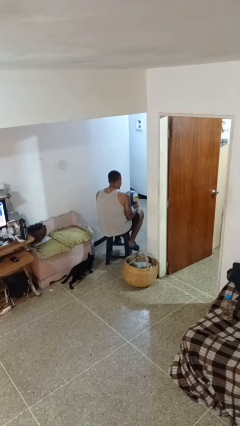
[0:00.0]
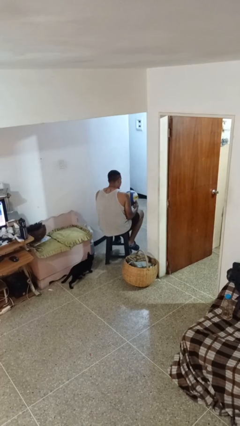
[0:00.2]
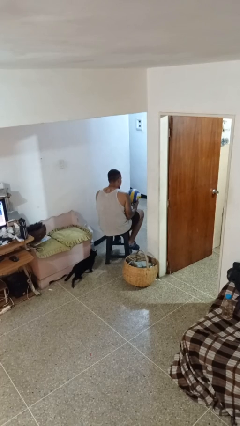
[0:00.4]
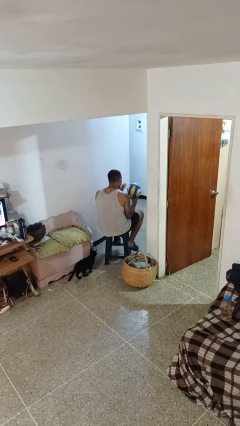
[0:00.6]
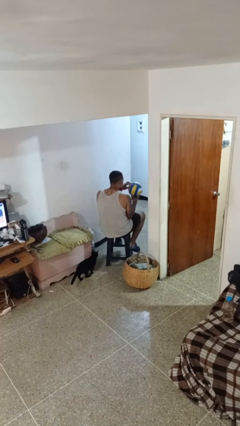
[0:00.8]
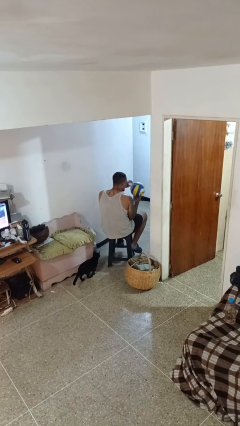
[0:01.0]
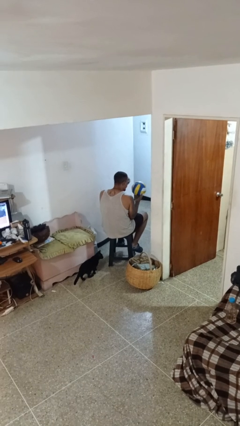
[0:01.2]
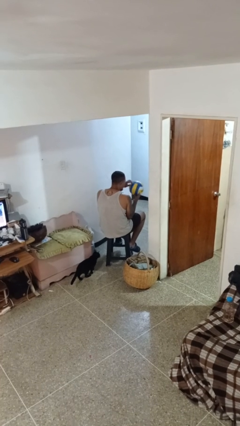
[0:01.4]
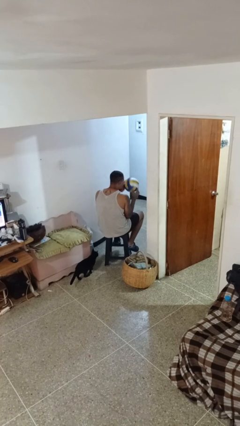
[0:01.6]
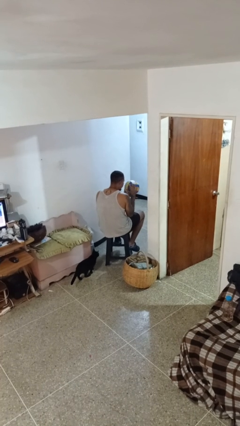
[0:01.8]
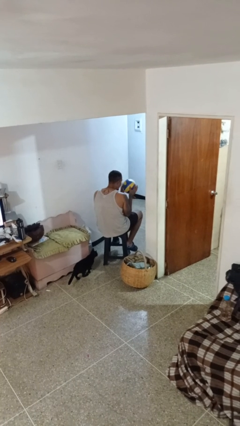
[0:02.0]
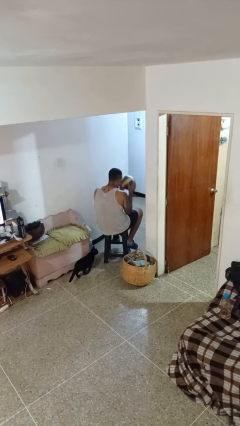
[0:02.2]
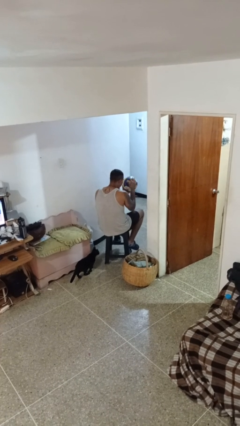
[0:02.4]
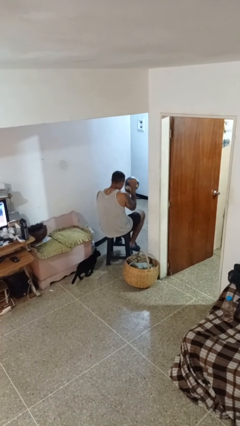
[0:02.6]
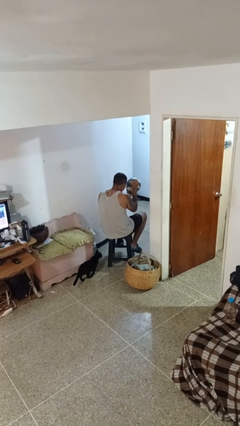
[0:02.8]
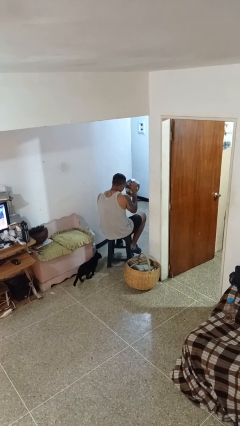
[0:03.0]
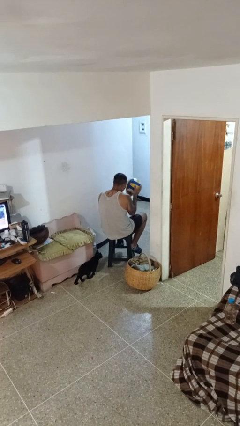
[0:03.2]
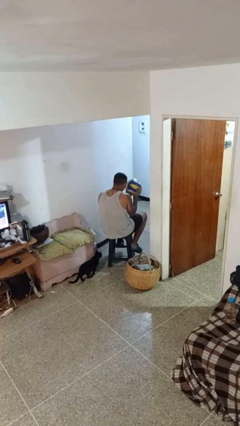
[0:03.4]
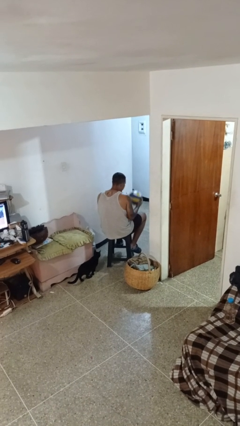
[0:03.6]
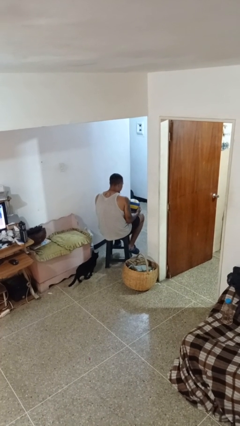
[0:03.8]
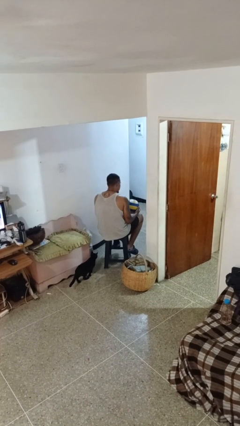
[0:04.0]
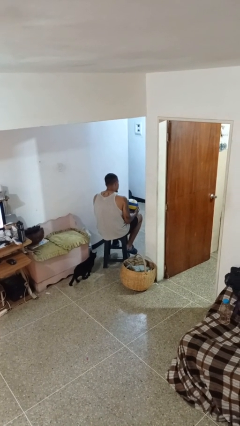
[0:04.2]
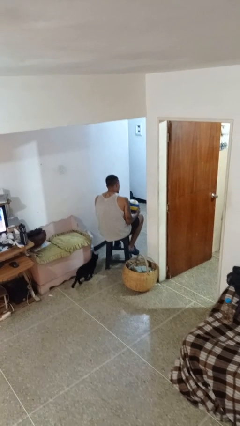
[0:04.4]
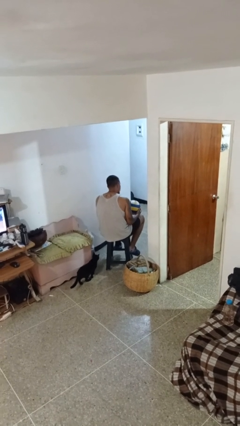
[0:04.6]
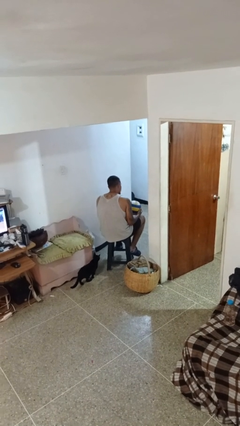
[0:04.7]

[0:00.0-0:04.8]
person taps object with finger

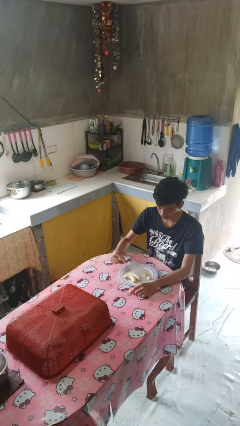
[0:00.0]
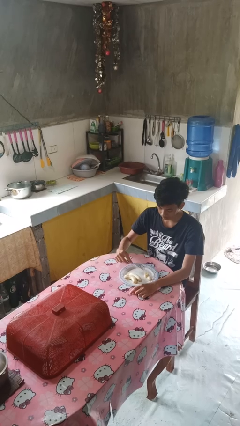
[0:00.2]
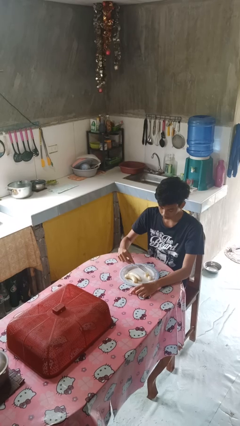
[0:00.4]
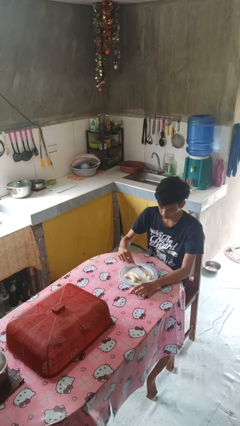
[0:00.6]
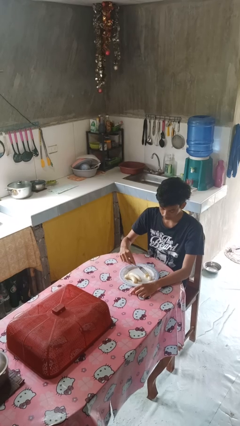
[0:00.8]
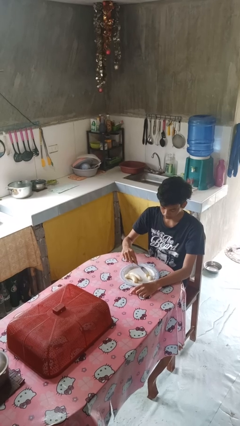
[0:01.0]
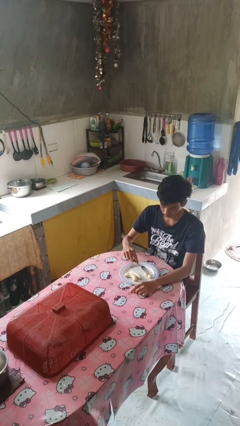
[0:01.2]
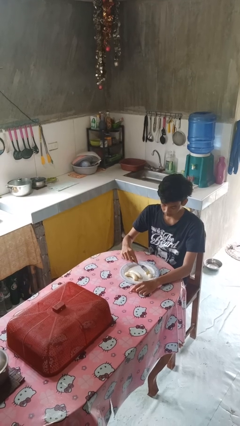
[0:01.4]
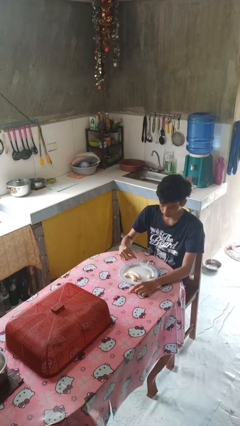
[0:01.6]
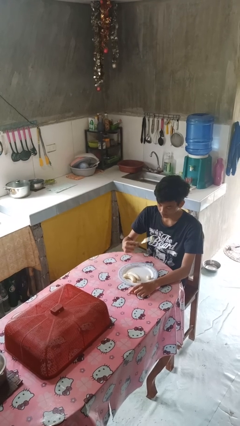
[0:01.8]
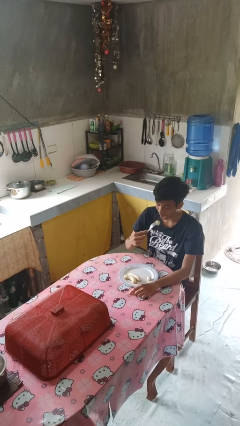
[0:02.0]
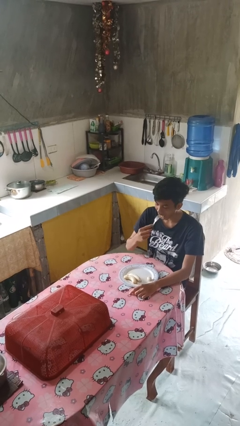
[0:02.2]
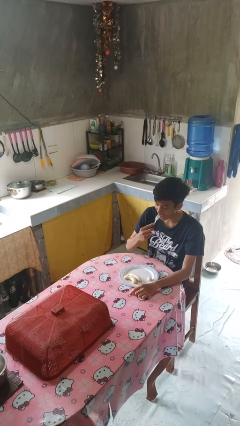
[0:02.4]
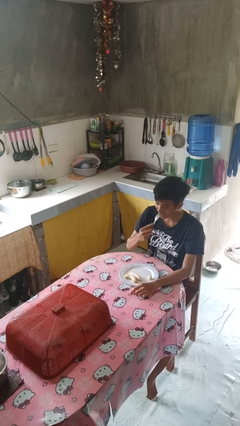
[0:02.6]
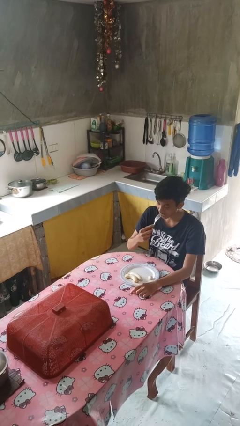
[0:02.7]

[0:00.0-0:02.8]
person eats with utensil

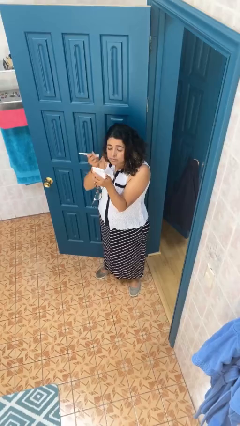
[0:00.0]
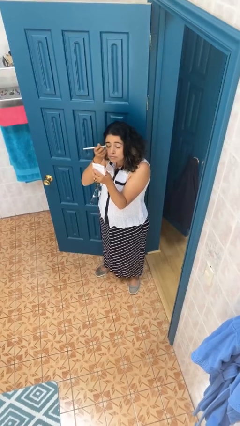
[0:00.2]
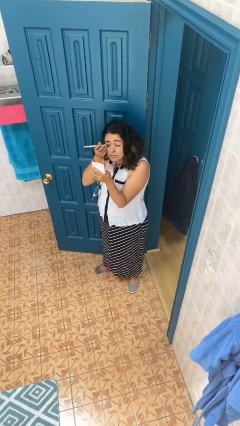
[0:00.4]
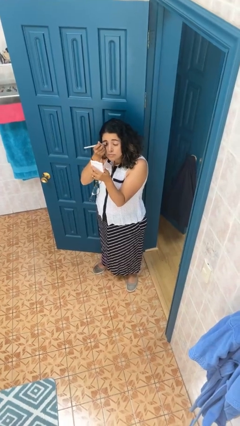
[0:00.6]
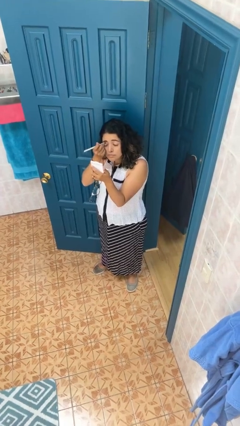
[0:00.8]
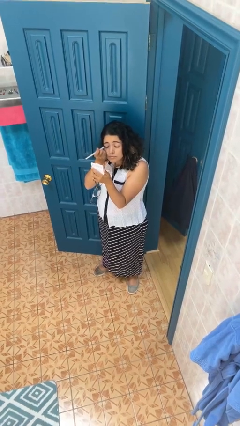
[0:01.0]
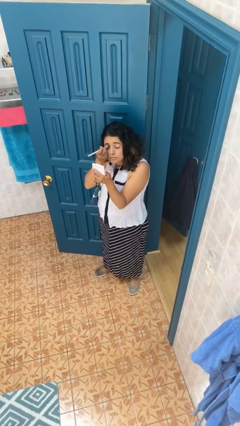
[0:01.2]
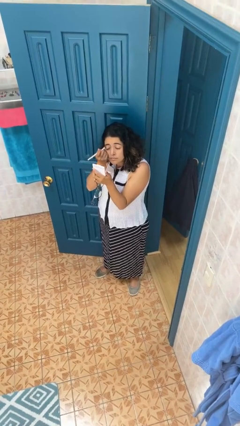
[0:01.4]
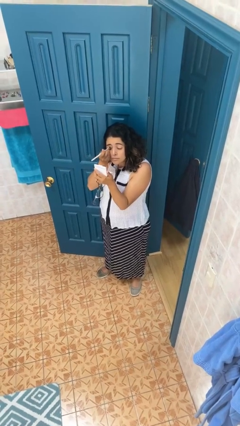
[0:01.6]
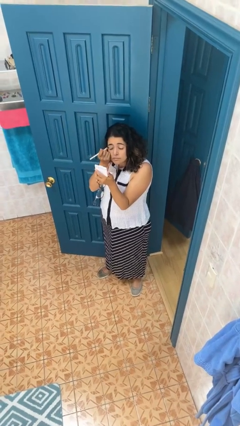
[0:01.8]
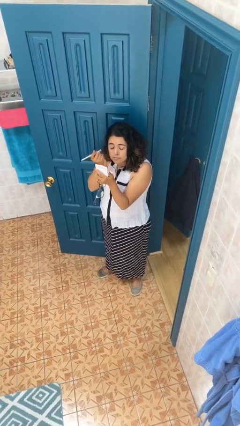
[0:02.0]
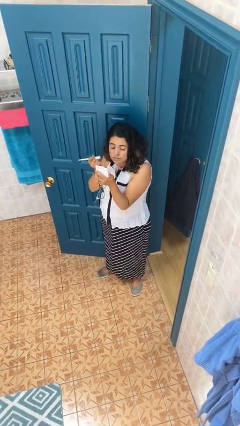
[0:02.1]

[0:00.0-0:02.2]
person applies eye makeup

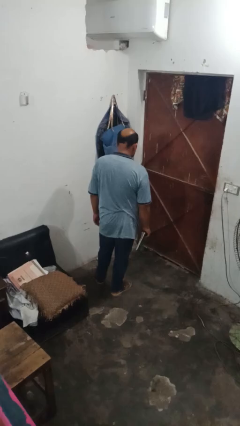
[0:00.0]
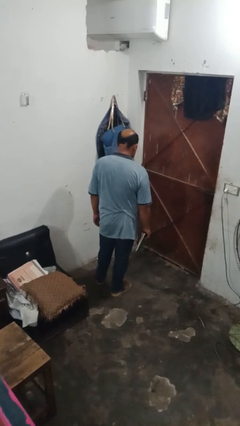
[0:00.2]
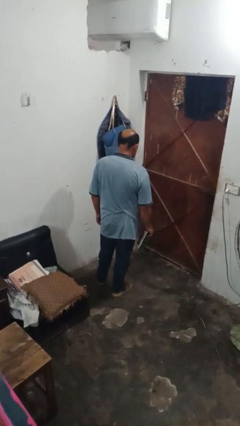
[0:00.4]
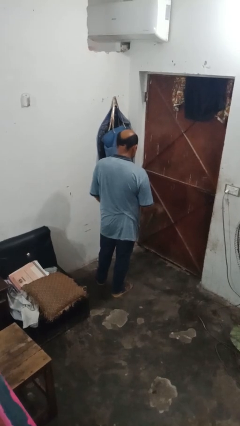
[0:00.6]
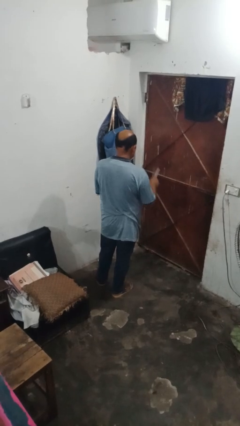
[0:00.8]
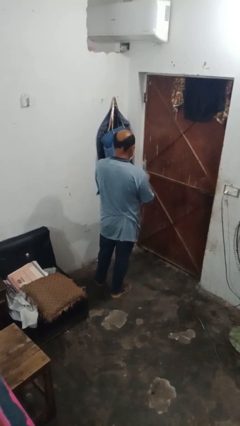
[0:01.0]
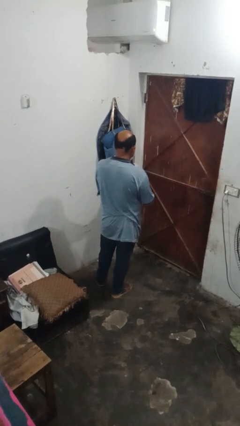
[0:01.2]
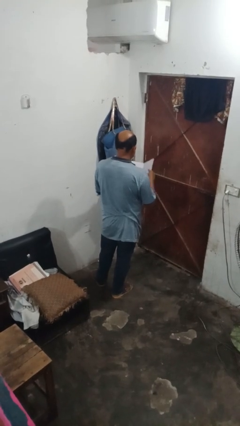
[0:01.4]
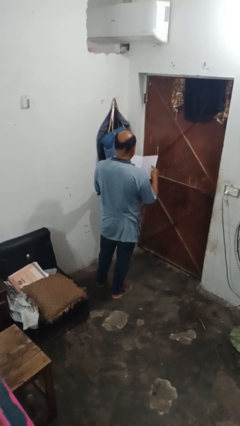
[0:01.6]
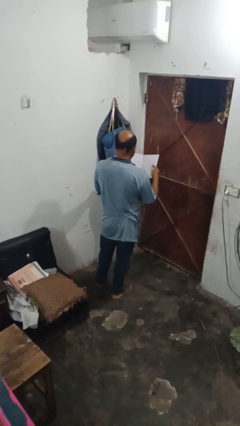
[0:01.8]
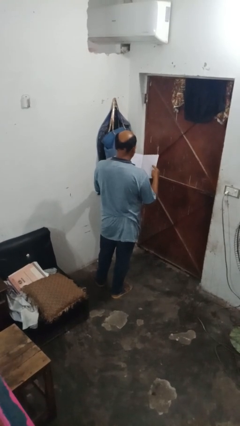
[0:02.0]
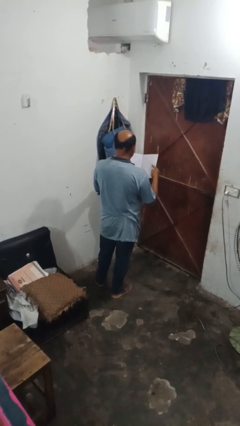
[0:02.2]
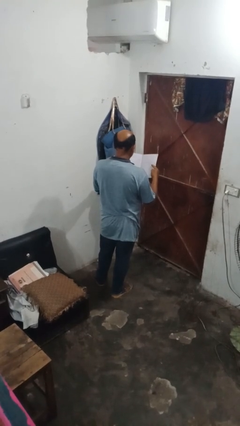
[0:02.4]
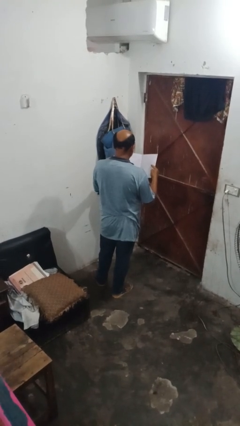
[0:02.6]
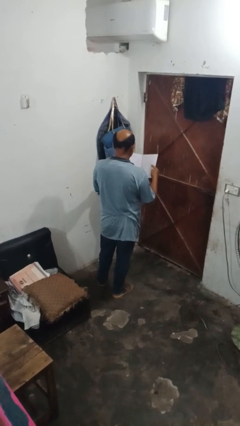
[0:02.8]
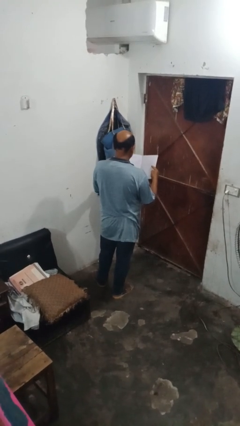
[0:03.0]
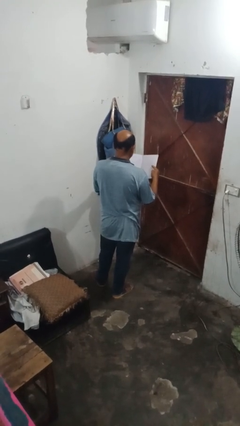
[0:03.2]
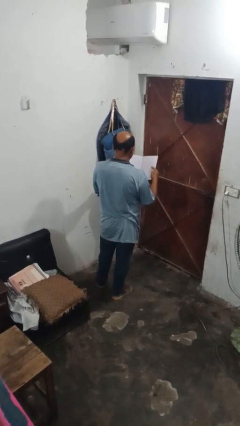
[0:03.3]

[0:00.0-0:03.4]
person reads book

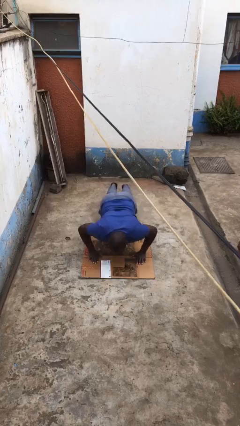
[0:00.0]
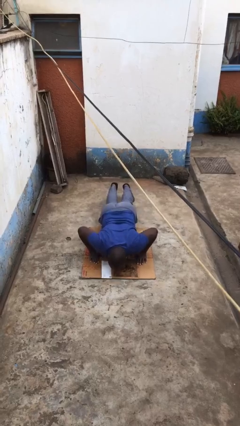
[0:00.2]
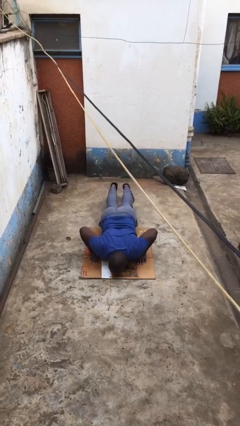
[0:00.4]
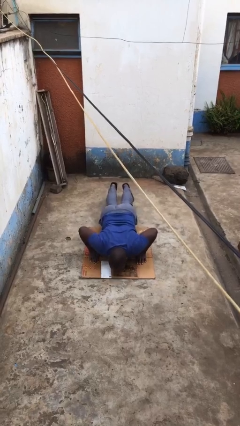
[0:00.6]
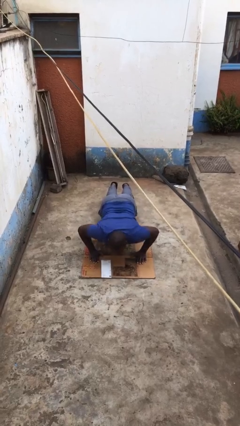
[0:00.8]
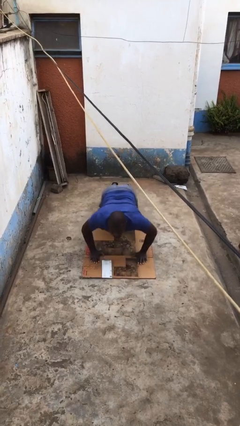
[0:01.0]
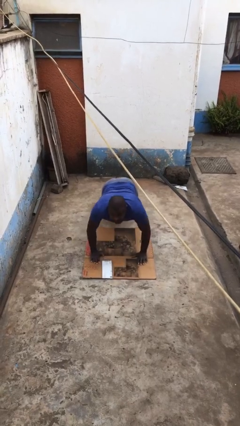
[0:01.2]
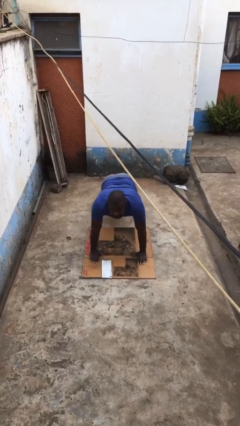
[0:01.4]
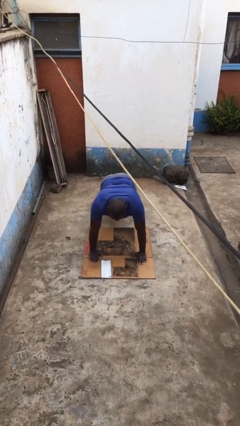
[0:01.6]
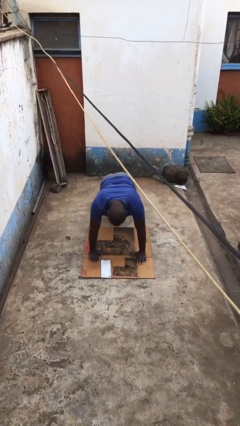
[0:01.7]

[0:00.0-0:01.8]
person exercises with pushup

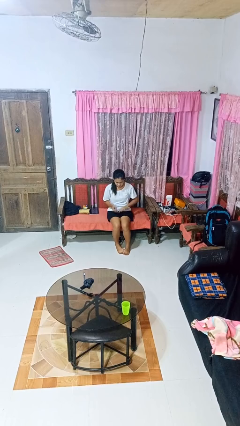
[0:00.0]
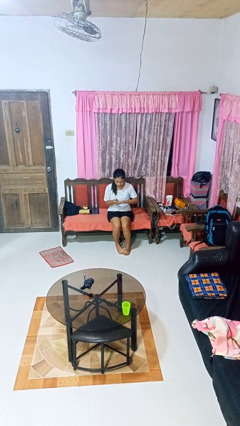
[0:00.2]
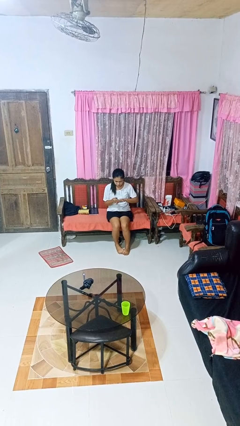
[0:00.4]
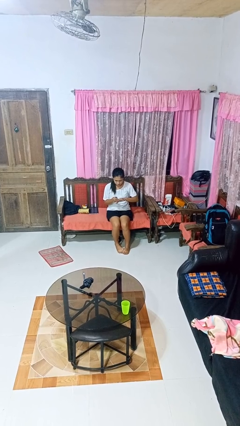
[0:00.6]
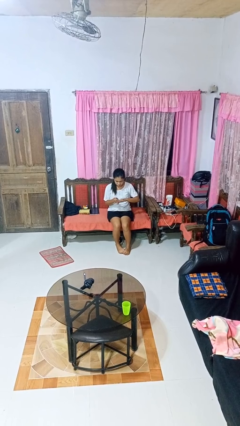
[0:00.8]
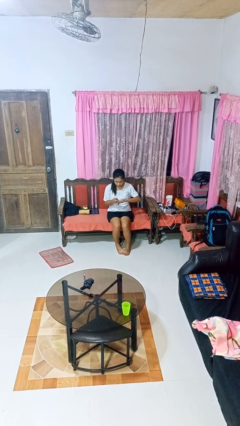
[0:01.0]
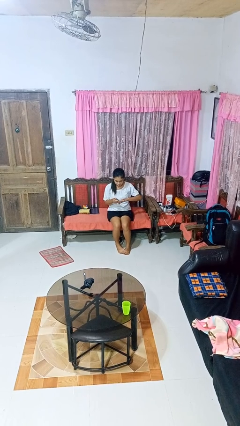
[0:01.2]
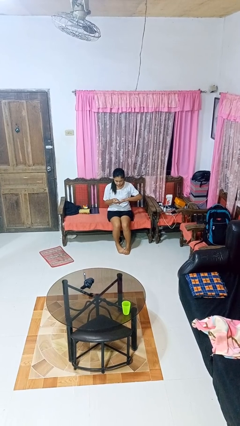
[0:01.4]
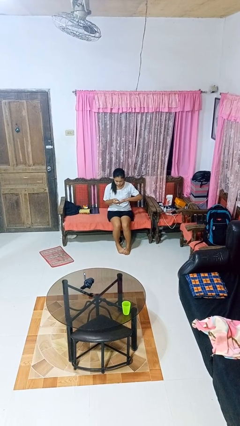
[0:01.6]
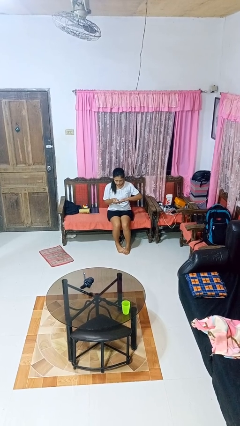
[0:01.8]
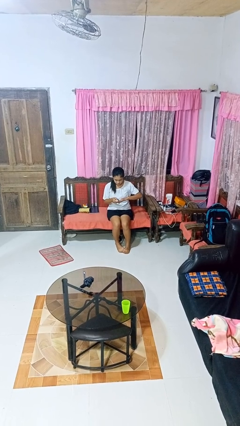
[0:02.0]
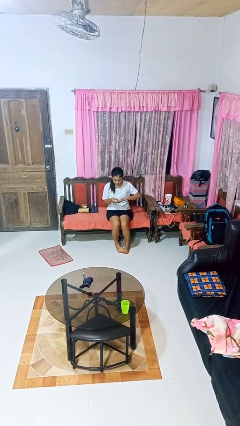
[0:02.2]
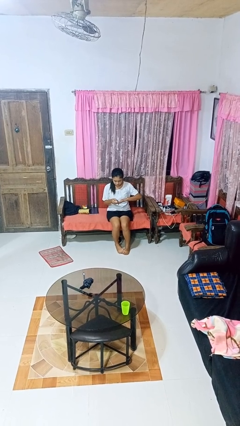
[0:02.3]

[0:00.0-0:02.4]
person clips fingernails

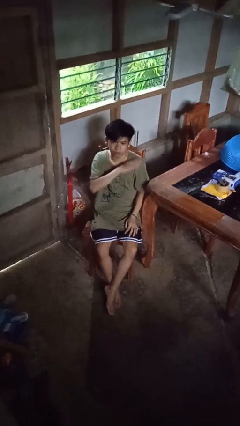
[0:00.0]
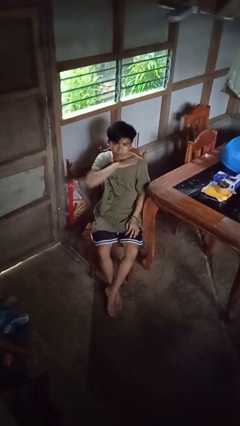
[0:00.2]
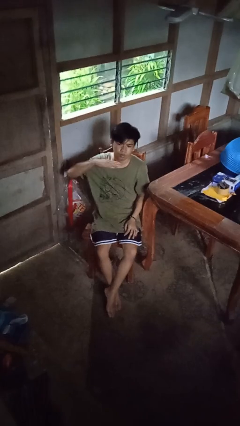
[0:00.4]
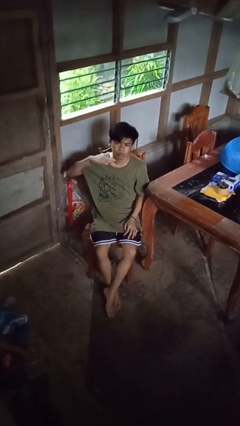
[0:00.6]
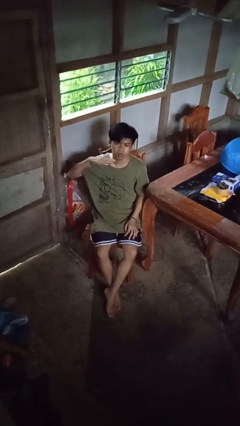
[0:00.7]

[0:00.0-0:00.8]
person gestures cut
